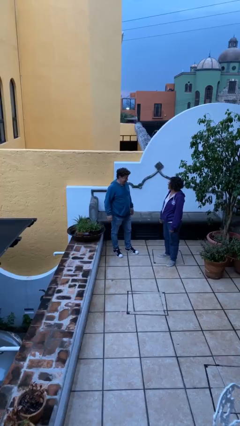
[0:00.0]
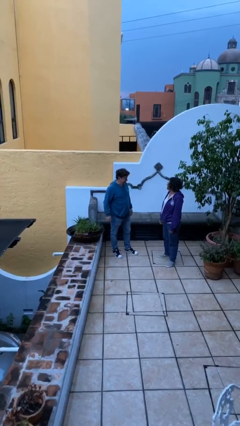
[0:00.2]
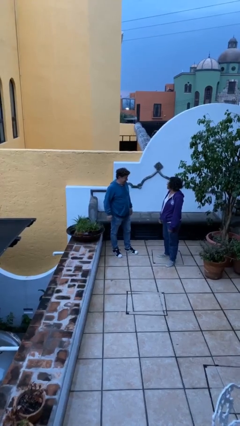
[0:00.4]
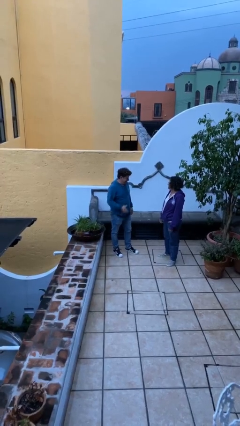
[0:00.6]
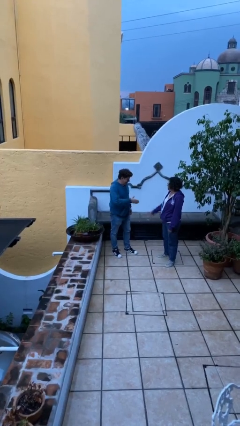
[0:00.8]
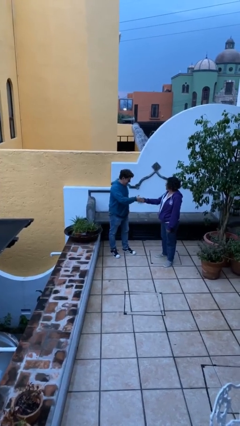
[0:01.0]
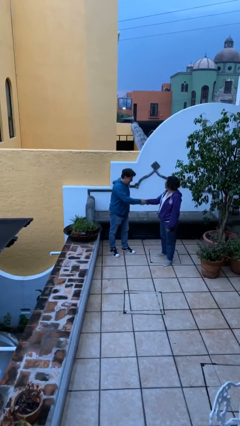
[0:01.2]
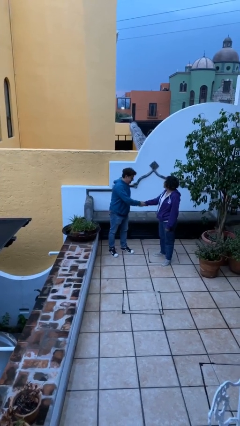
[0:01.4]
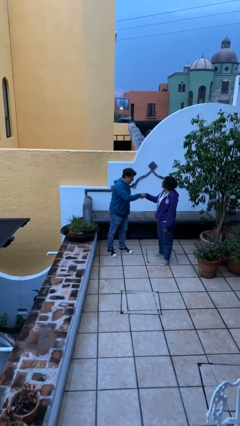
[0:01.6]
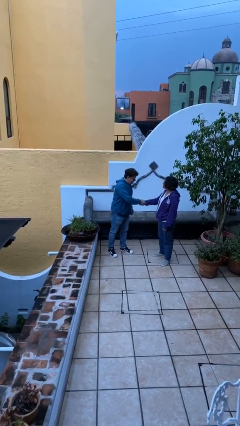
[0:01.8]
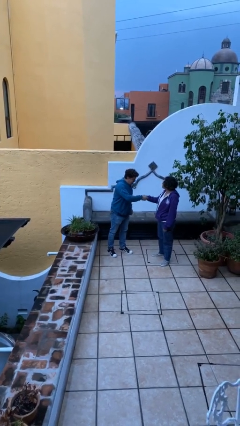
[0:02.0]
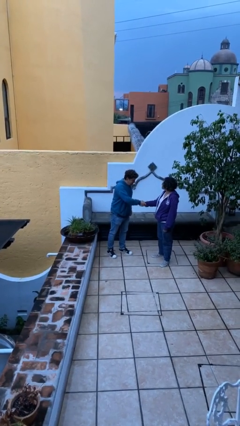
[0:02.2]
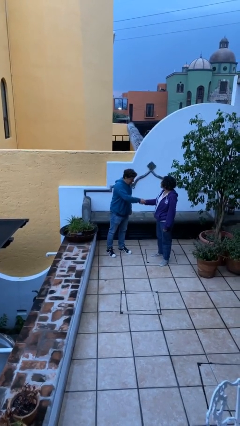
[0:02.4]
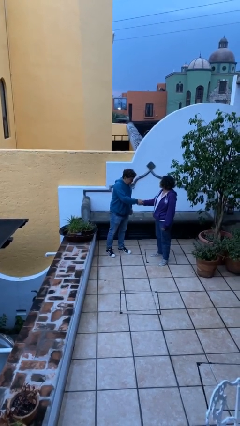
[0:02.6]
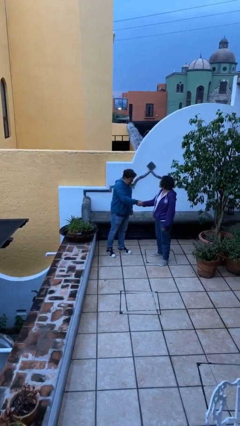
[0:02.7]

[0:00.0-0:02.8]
person shakes hand

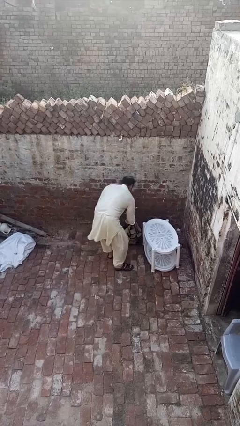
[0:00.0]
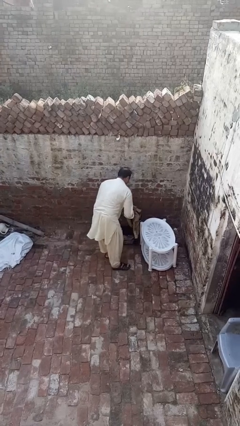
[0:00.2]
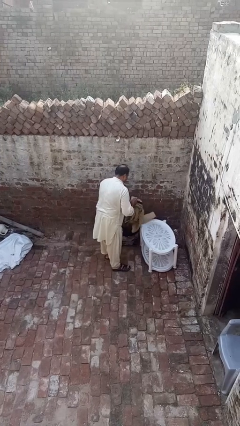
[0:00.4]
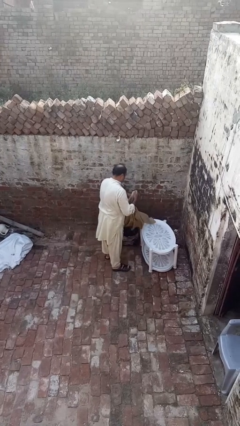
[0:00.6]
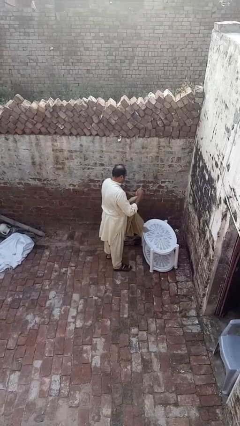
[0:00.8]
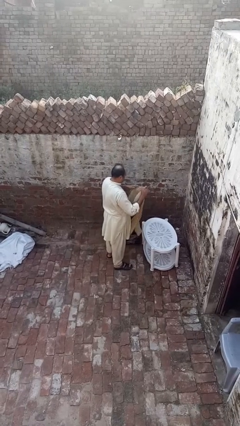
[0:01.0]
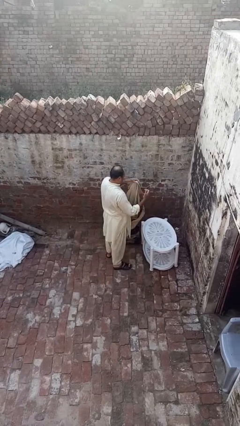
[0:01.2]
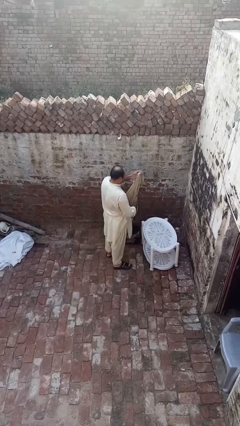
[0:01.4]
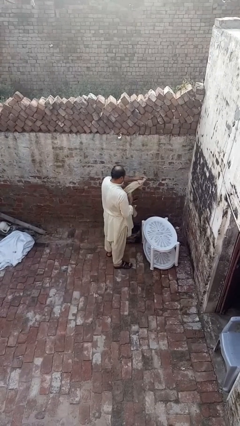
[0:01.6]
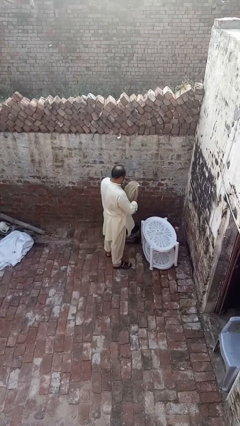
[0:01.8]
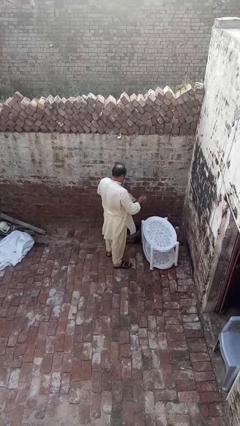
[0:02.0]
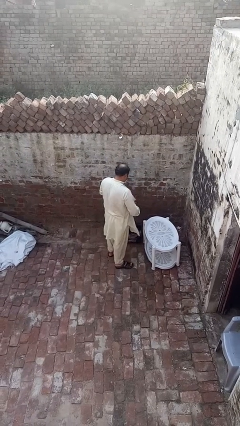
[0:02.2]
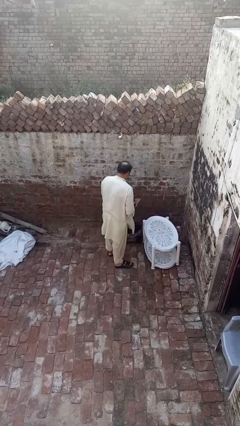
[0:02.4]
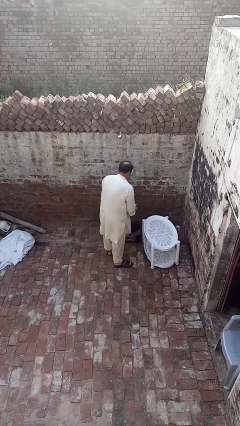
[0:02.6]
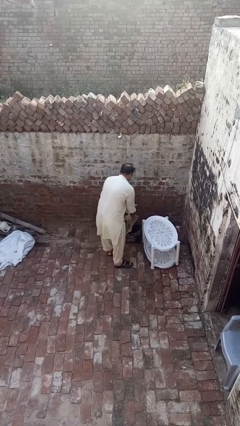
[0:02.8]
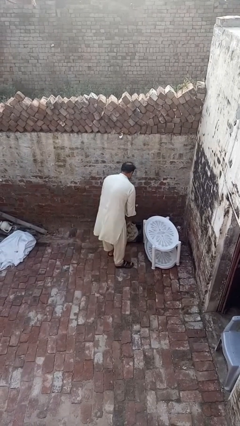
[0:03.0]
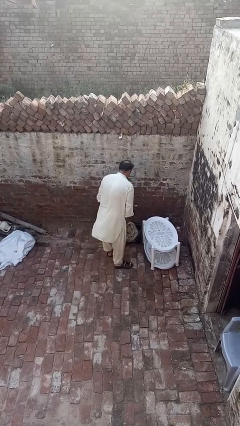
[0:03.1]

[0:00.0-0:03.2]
person folds shirt

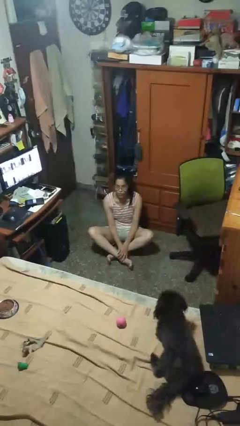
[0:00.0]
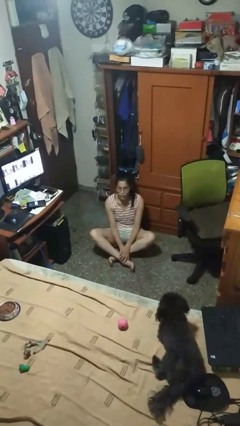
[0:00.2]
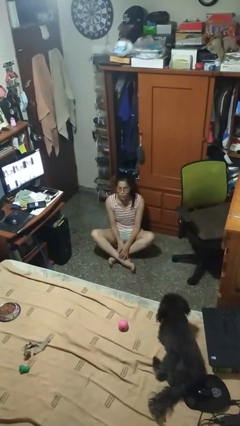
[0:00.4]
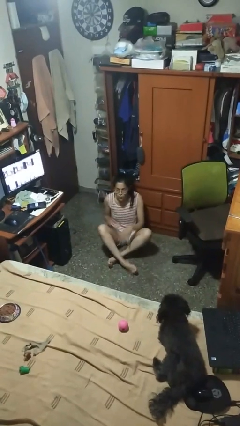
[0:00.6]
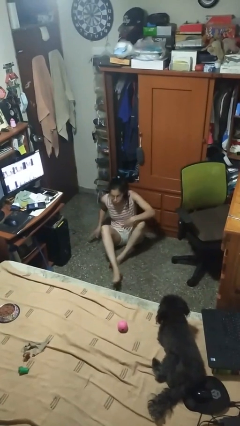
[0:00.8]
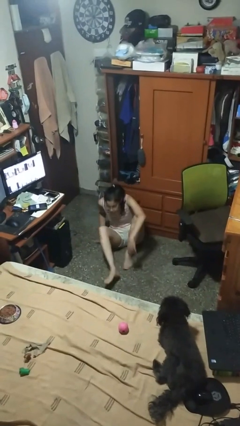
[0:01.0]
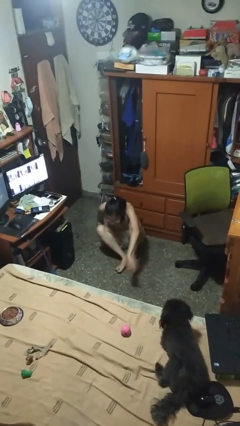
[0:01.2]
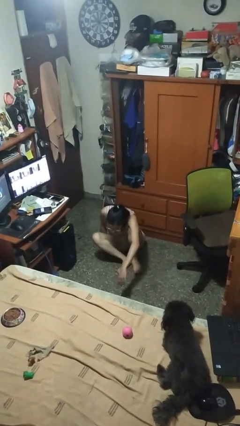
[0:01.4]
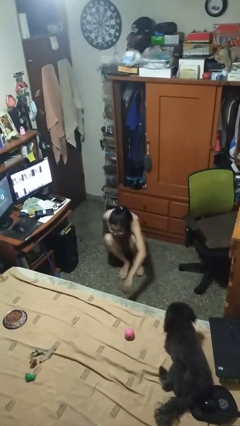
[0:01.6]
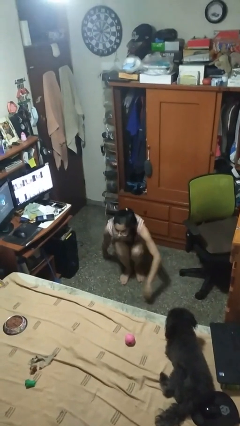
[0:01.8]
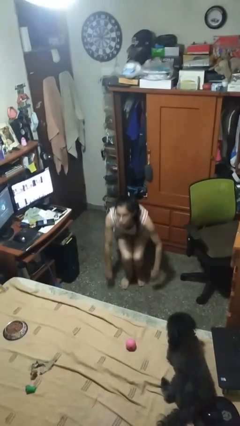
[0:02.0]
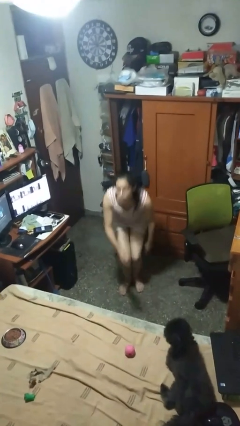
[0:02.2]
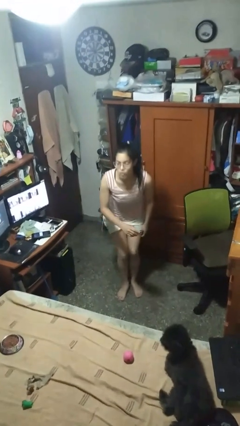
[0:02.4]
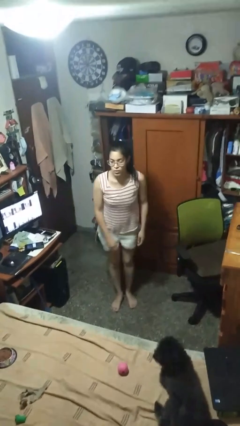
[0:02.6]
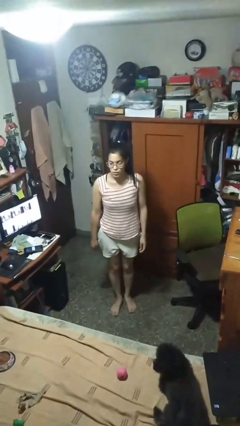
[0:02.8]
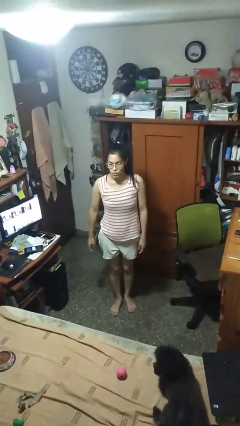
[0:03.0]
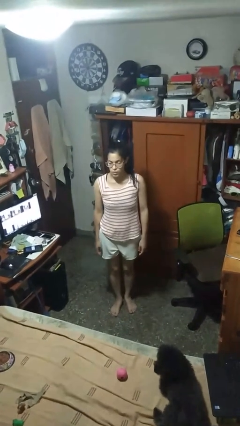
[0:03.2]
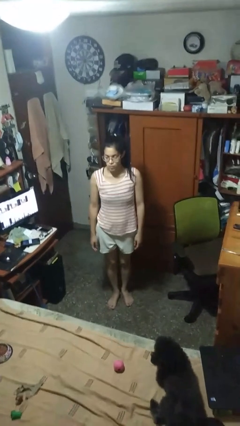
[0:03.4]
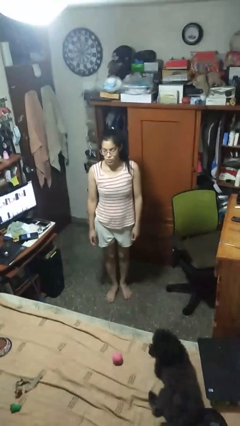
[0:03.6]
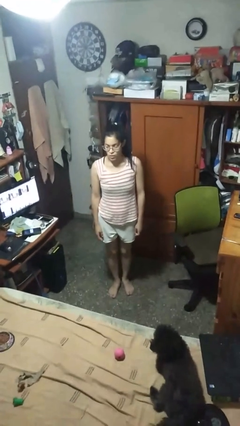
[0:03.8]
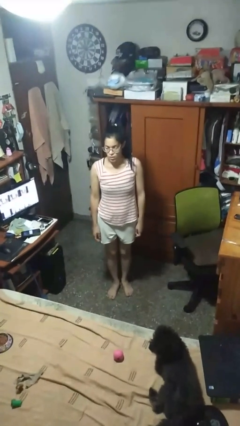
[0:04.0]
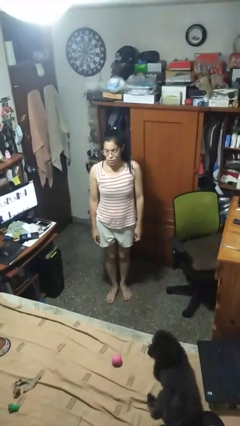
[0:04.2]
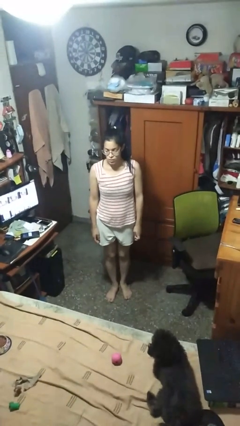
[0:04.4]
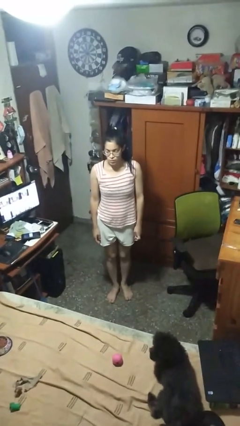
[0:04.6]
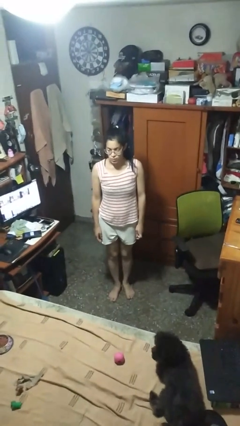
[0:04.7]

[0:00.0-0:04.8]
person stands up from floor

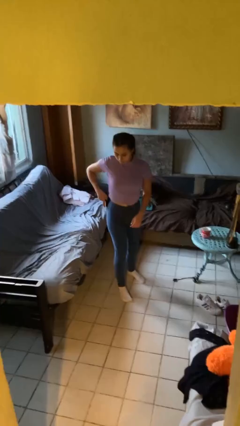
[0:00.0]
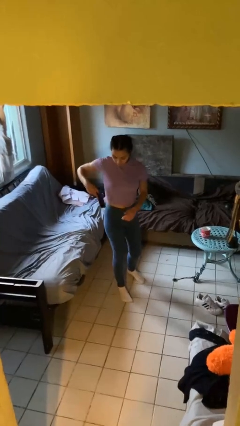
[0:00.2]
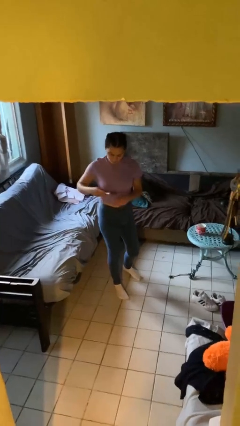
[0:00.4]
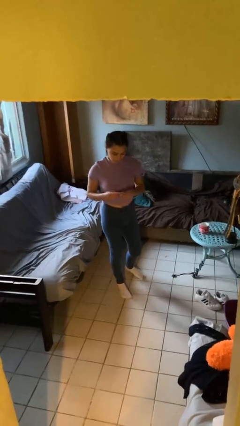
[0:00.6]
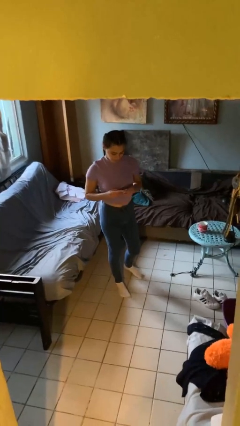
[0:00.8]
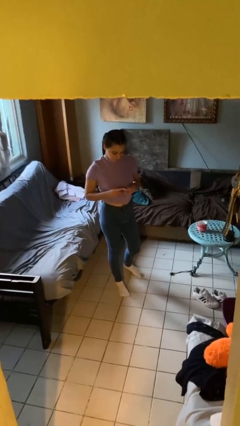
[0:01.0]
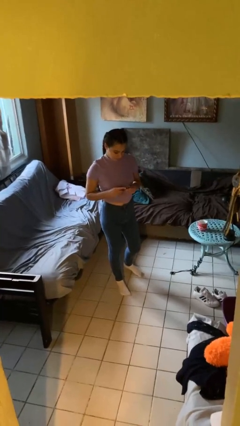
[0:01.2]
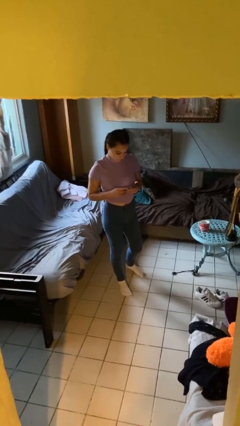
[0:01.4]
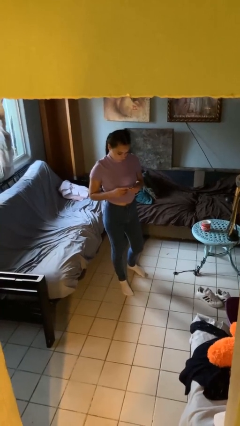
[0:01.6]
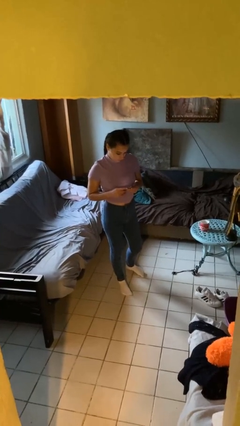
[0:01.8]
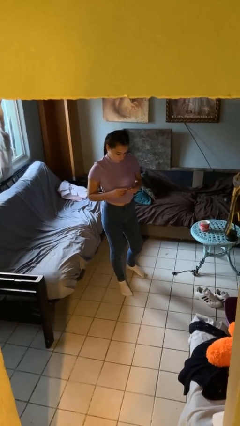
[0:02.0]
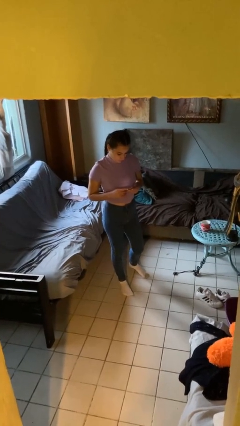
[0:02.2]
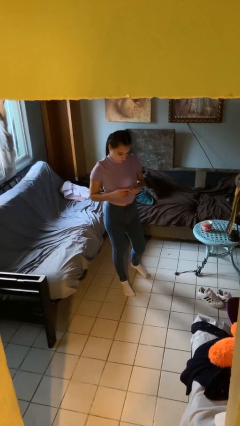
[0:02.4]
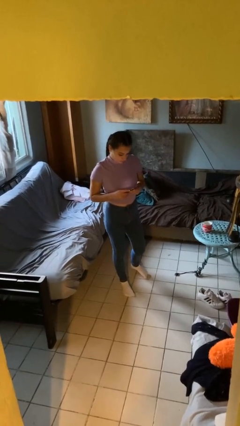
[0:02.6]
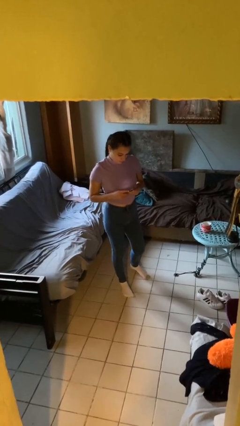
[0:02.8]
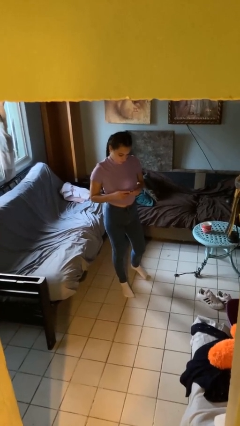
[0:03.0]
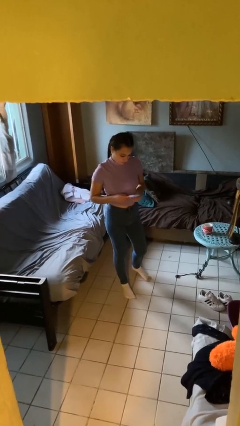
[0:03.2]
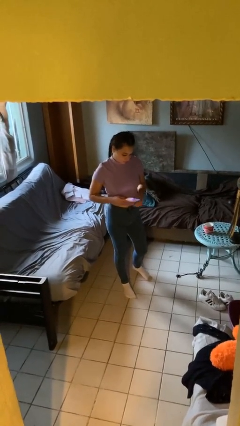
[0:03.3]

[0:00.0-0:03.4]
person takes phone from pocket

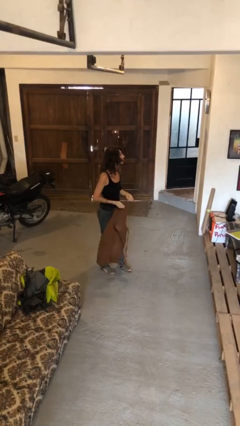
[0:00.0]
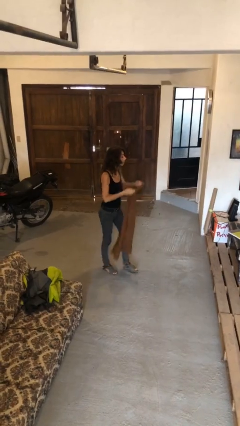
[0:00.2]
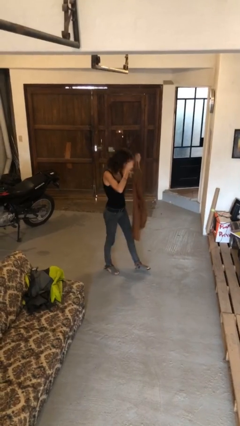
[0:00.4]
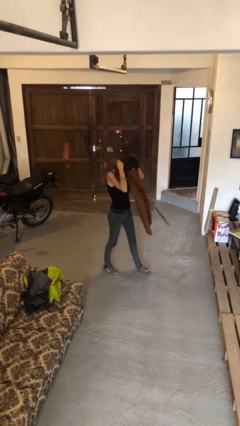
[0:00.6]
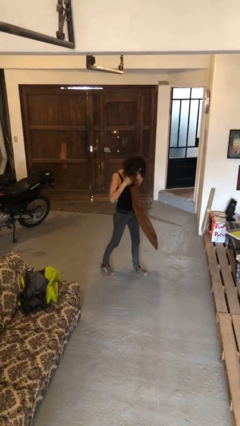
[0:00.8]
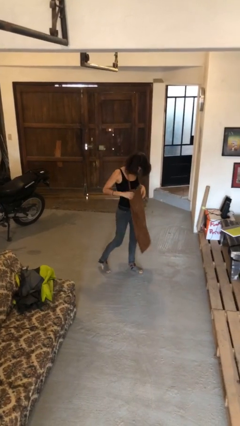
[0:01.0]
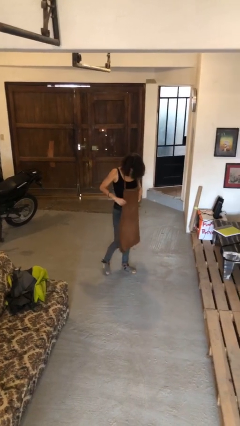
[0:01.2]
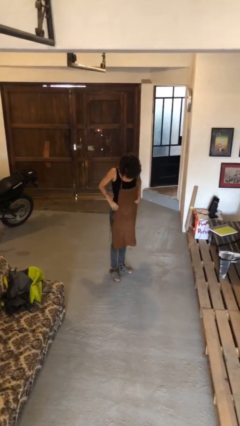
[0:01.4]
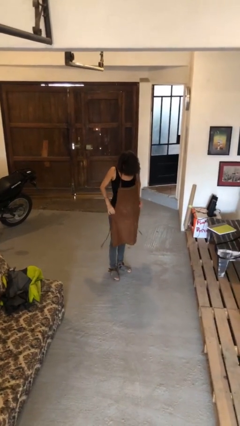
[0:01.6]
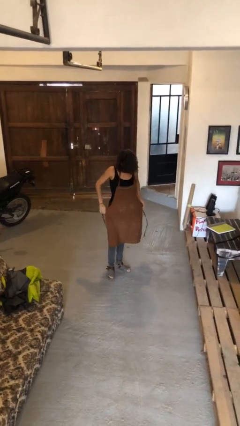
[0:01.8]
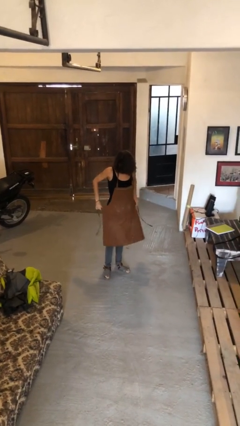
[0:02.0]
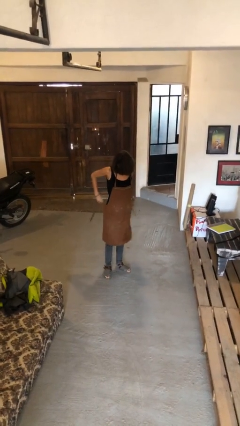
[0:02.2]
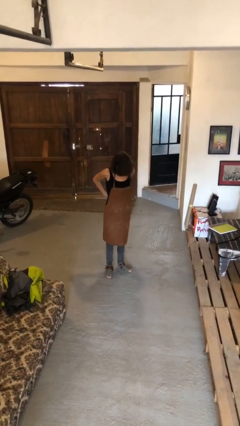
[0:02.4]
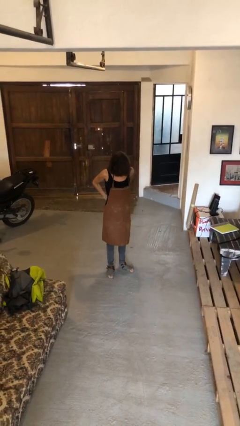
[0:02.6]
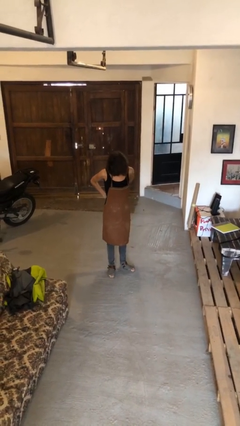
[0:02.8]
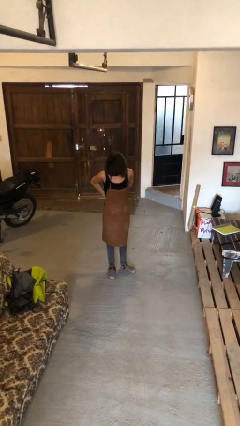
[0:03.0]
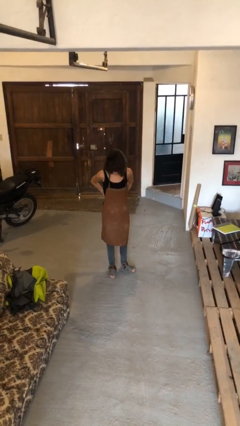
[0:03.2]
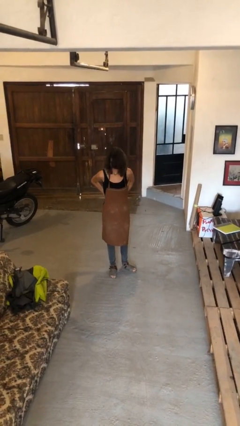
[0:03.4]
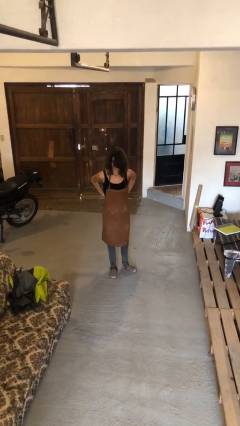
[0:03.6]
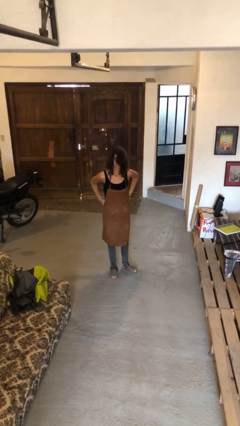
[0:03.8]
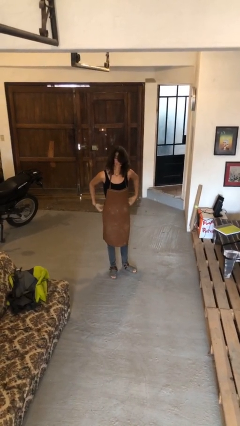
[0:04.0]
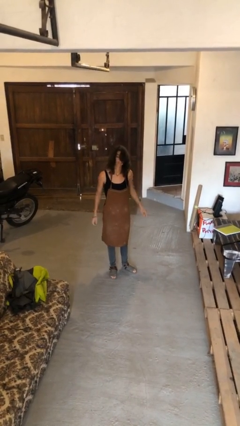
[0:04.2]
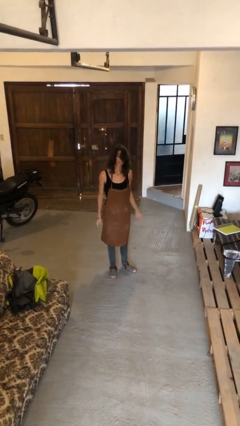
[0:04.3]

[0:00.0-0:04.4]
person puts on apron
